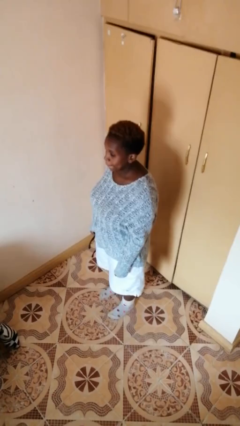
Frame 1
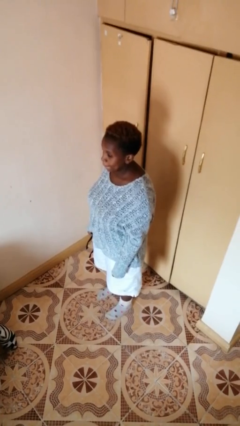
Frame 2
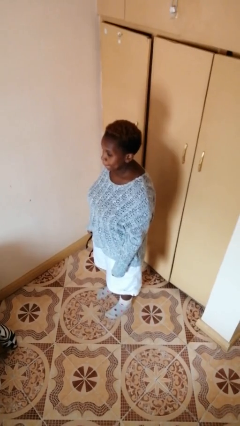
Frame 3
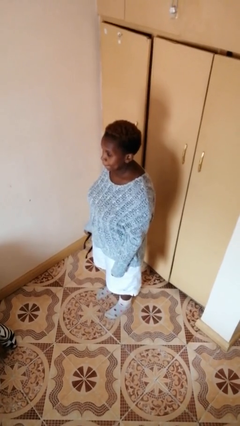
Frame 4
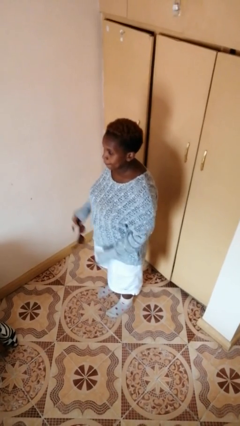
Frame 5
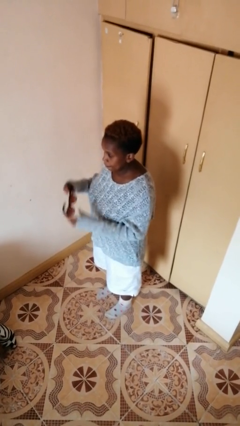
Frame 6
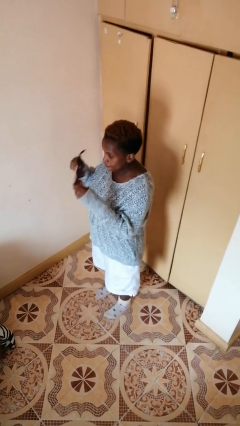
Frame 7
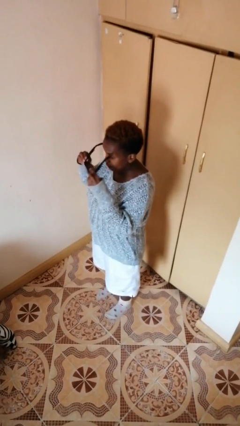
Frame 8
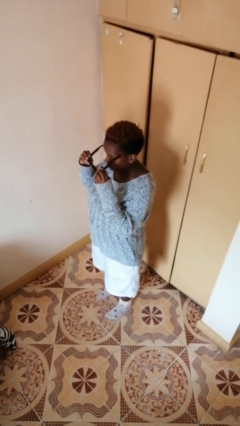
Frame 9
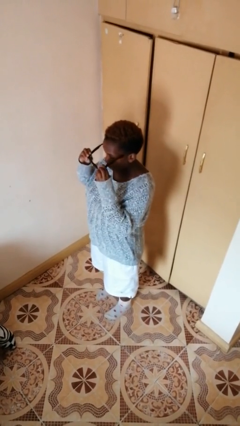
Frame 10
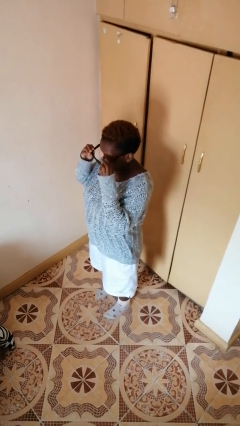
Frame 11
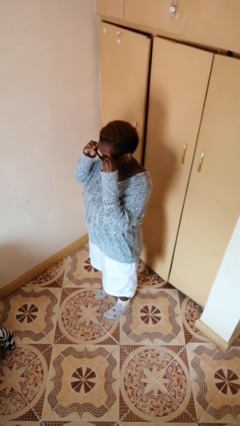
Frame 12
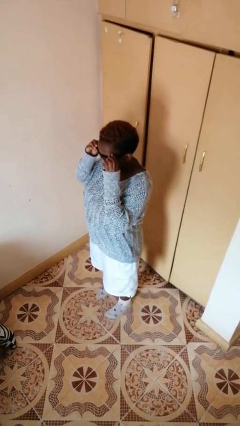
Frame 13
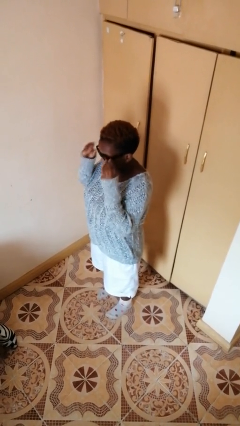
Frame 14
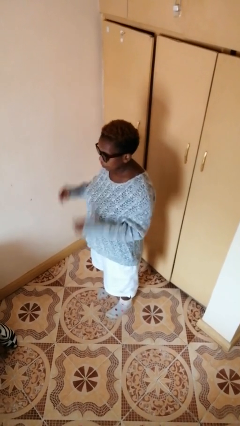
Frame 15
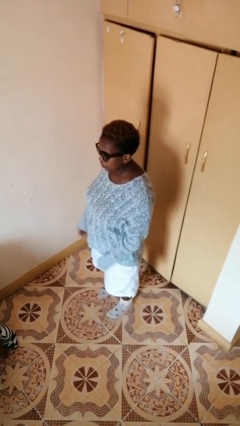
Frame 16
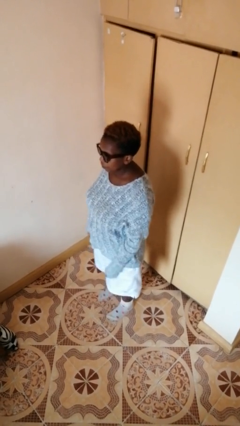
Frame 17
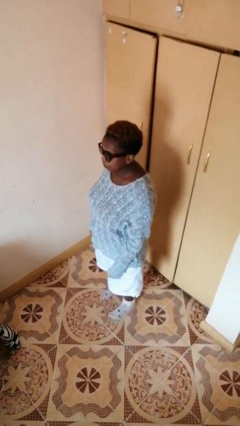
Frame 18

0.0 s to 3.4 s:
person puts on sunglasses

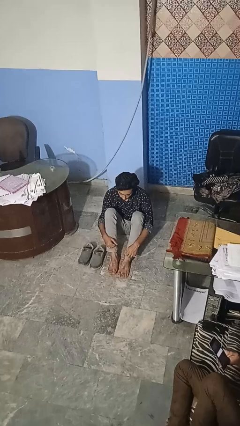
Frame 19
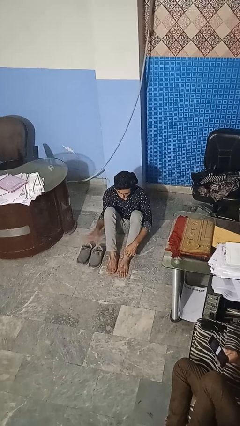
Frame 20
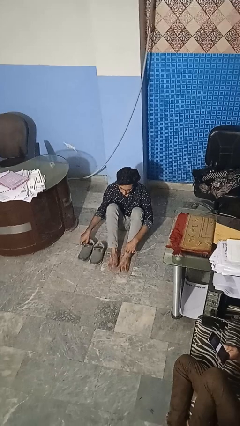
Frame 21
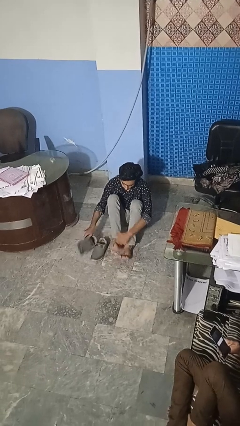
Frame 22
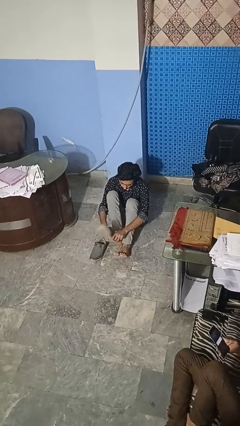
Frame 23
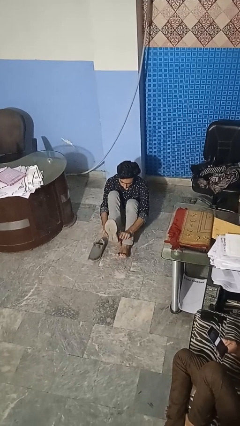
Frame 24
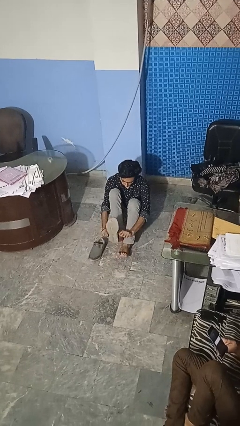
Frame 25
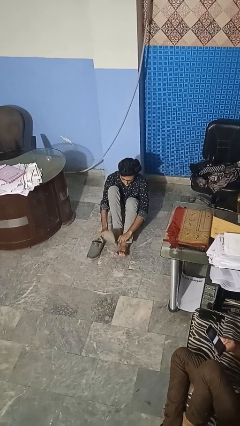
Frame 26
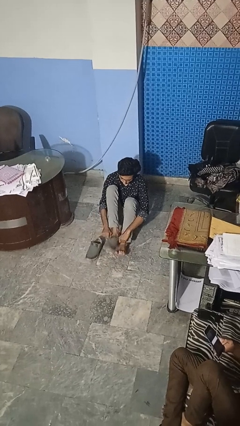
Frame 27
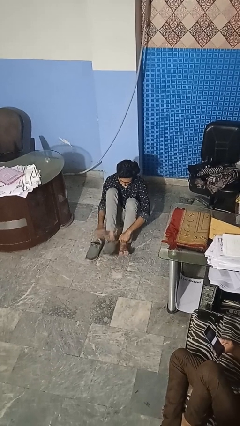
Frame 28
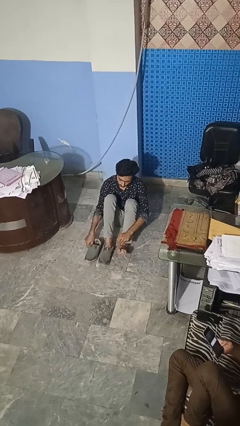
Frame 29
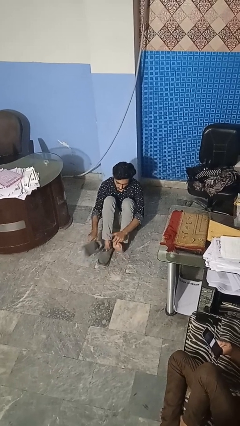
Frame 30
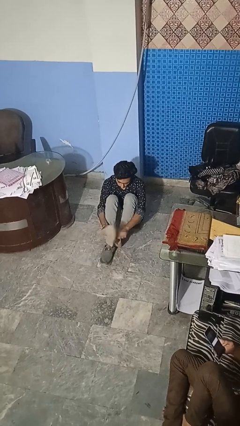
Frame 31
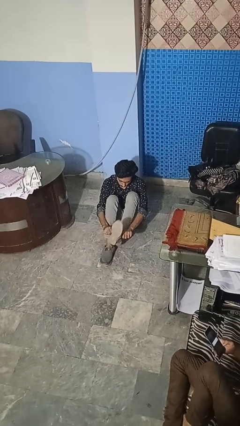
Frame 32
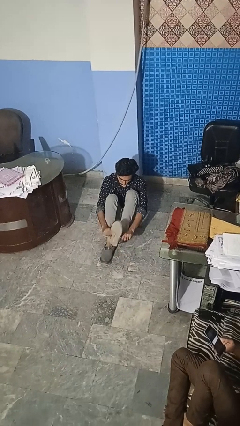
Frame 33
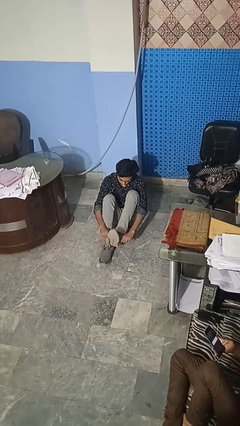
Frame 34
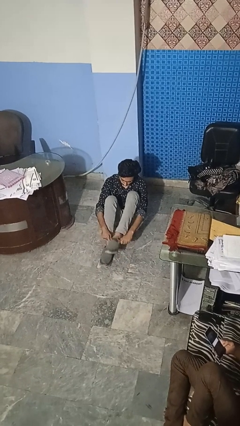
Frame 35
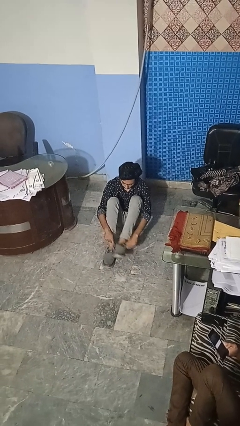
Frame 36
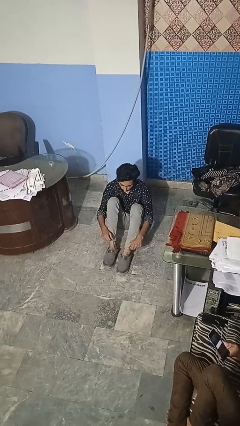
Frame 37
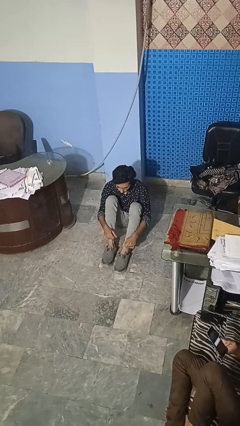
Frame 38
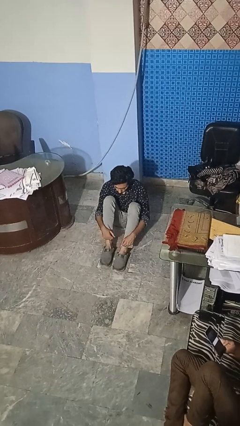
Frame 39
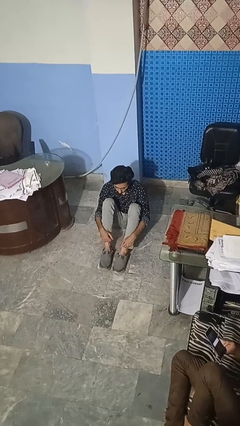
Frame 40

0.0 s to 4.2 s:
person puts on shoes

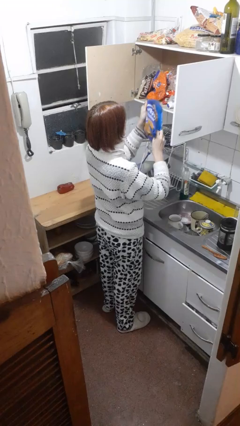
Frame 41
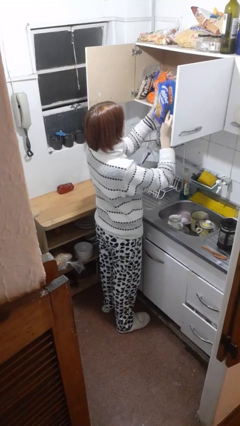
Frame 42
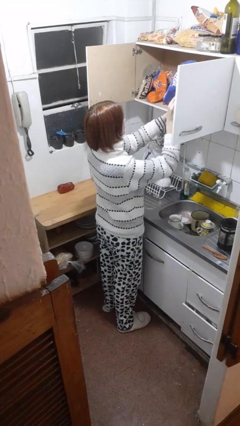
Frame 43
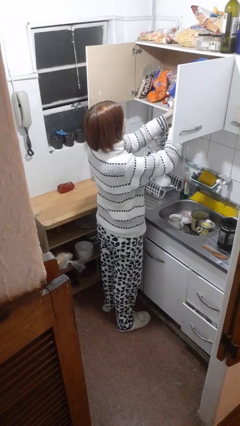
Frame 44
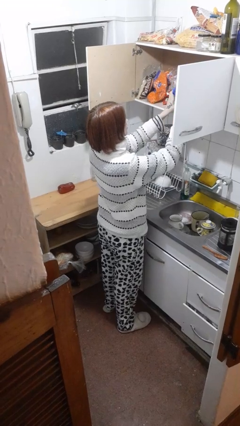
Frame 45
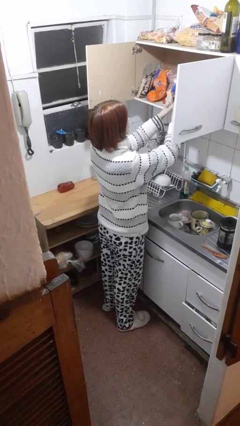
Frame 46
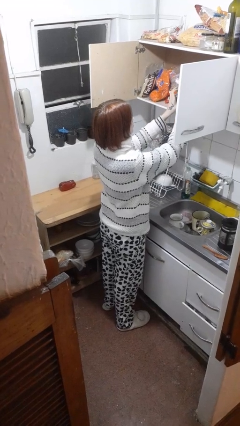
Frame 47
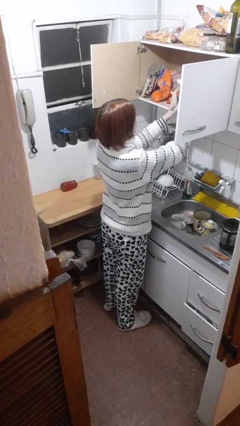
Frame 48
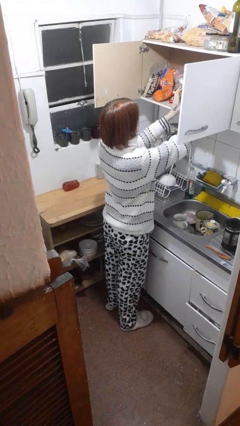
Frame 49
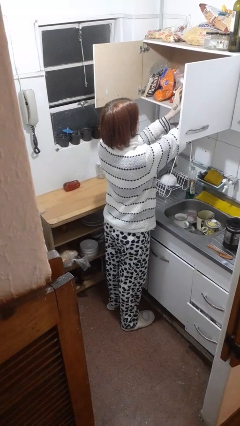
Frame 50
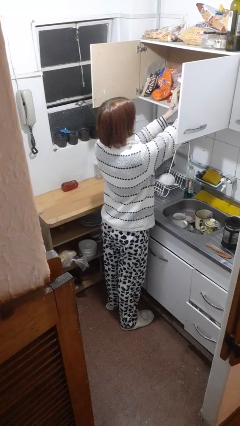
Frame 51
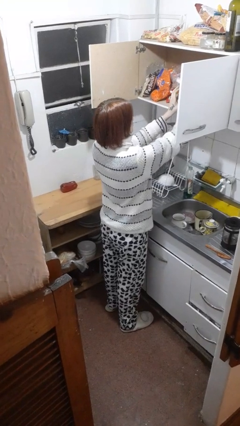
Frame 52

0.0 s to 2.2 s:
person puts object in cabinet

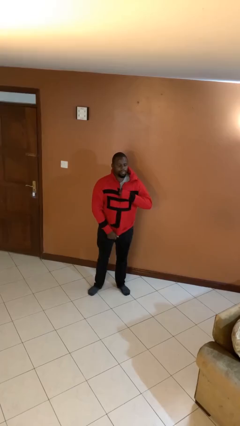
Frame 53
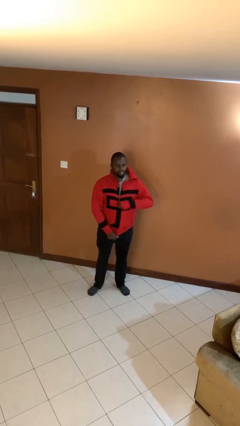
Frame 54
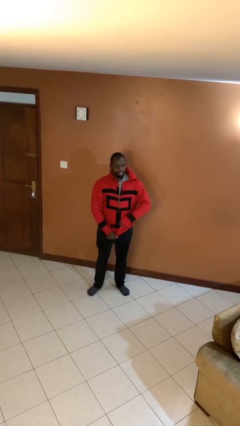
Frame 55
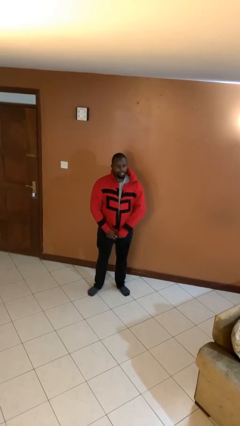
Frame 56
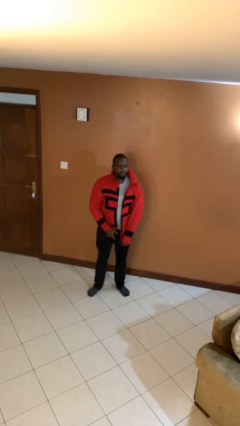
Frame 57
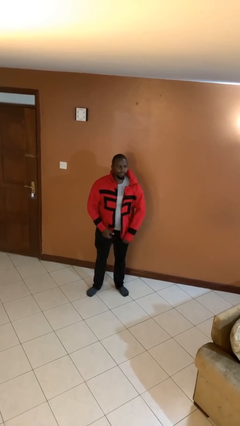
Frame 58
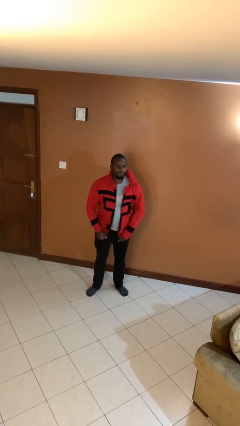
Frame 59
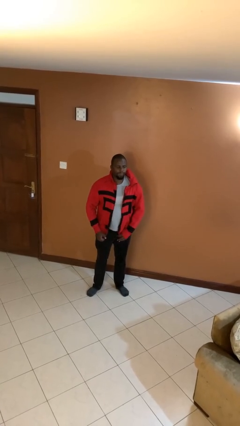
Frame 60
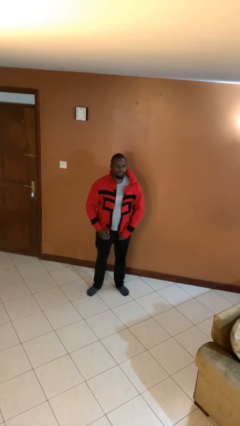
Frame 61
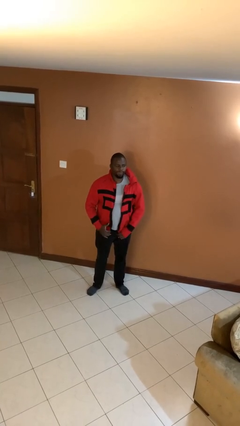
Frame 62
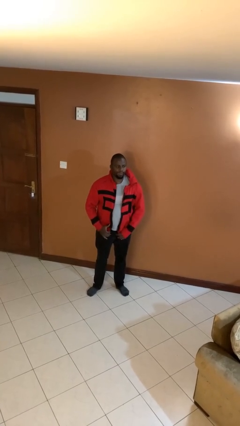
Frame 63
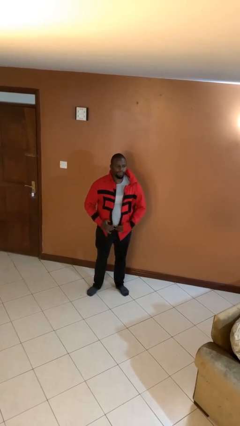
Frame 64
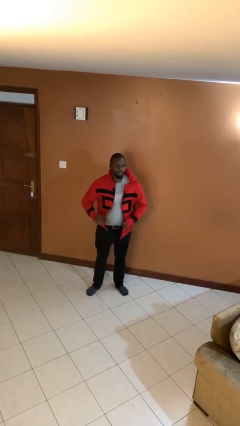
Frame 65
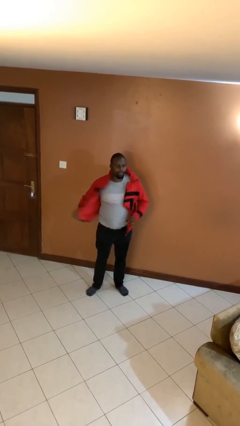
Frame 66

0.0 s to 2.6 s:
person unzips jacket

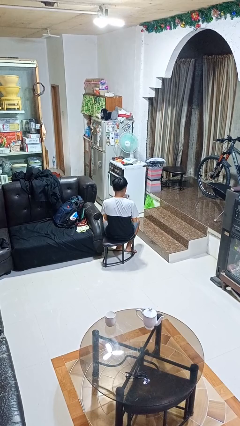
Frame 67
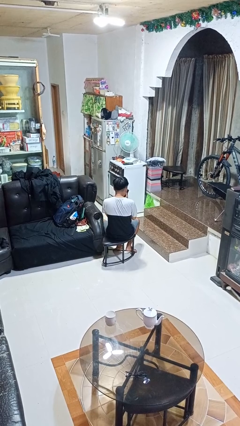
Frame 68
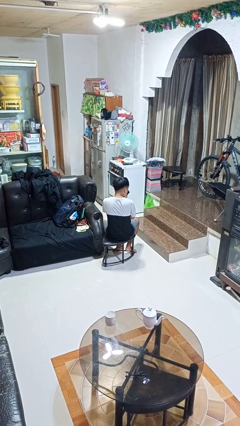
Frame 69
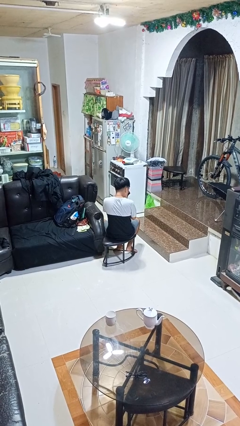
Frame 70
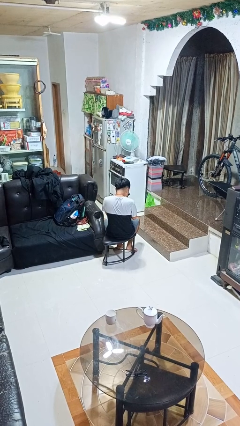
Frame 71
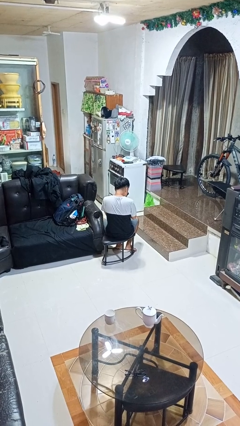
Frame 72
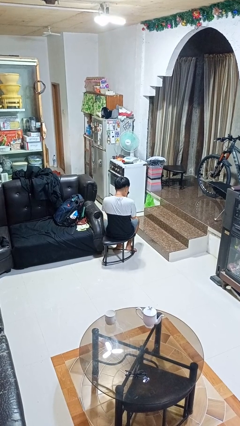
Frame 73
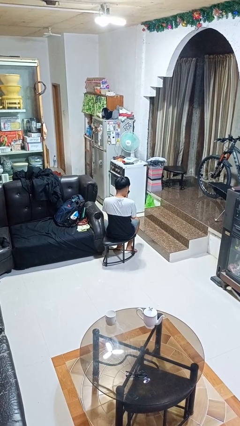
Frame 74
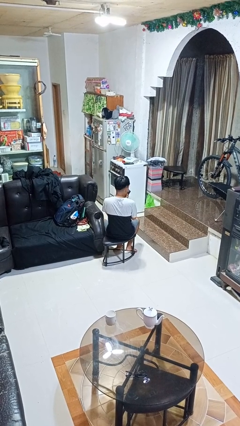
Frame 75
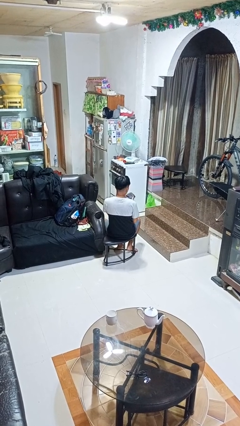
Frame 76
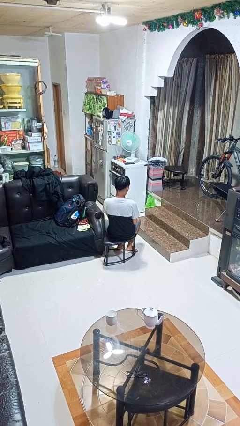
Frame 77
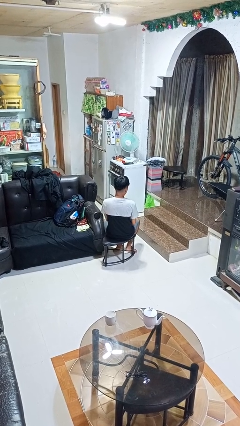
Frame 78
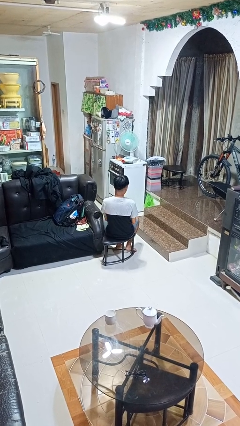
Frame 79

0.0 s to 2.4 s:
person blows nose

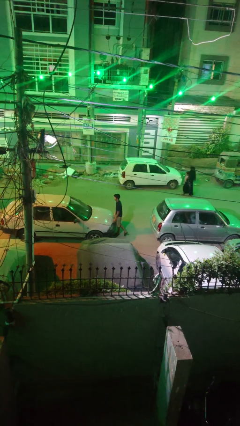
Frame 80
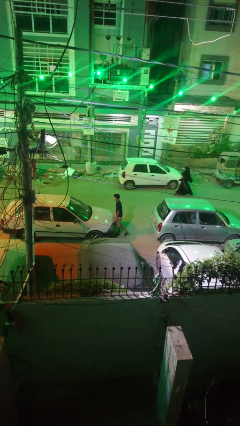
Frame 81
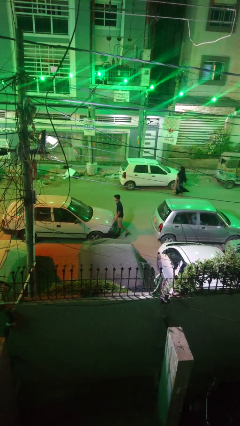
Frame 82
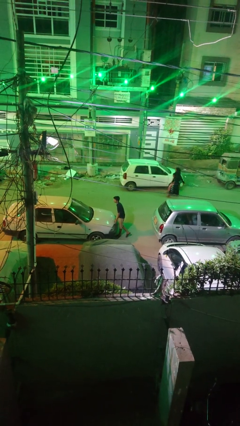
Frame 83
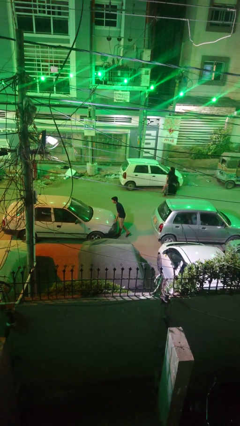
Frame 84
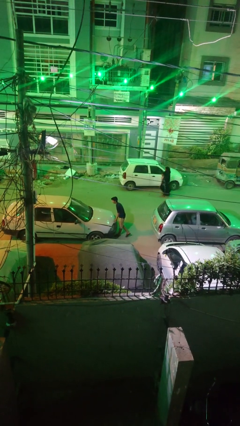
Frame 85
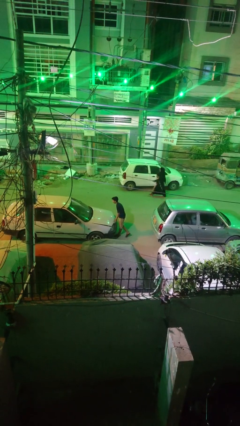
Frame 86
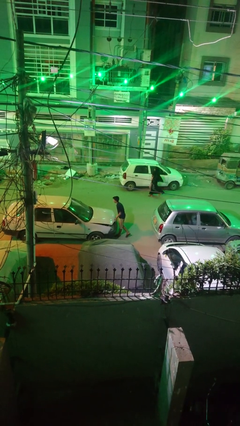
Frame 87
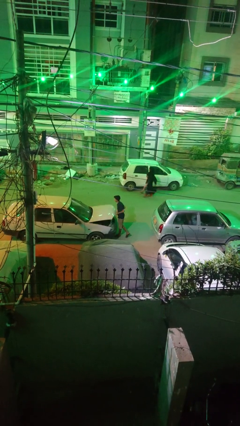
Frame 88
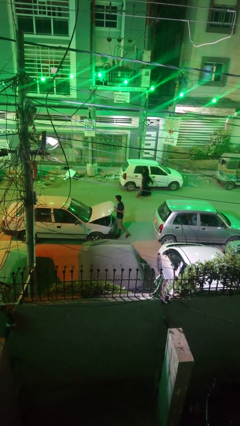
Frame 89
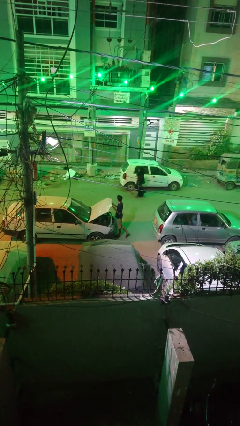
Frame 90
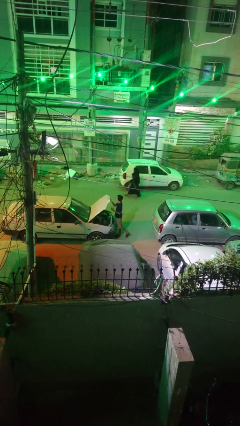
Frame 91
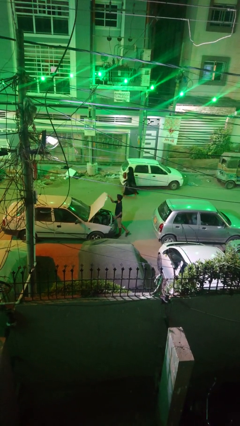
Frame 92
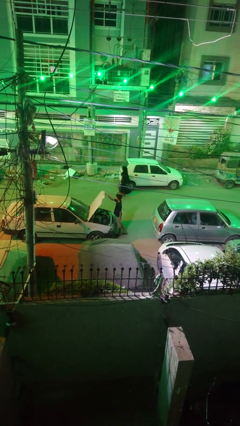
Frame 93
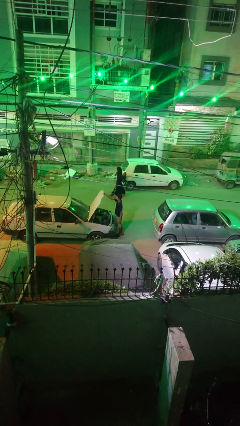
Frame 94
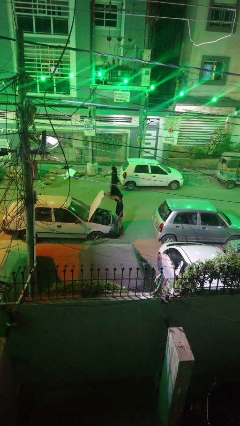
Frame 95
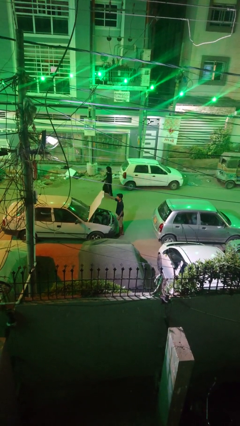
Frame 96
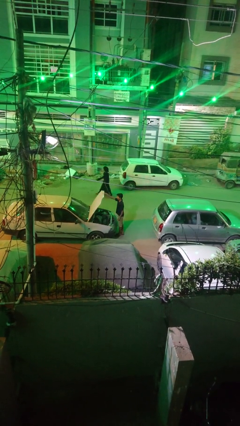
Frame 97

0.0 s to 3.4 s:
person opens car hood
